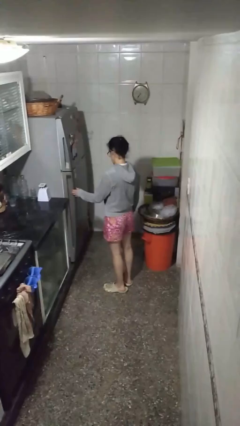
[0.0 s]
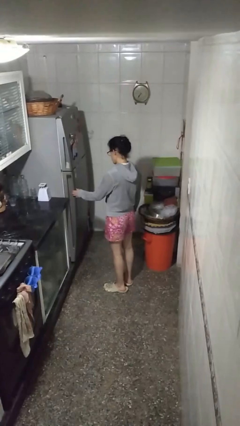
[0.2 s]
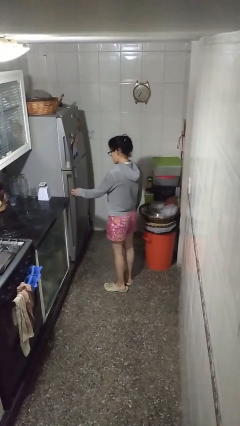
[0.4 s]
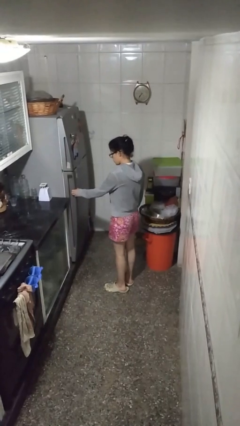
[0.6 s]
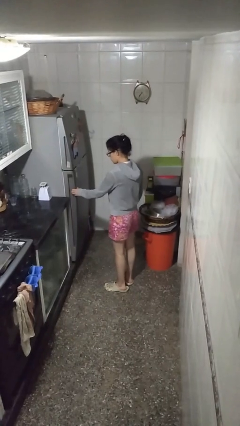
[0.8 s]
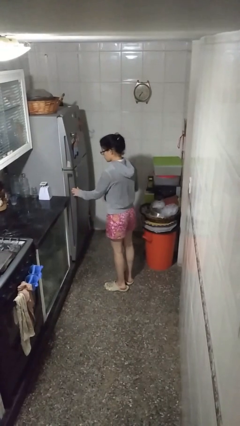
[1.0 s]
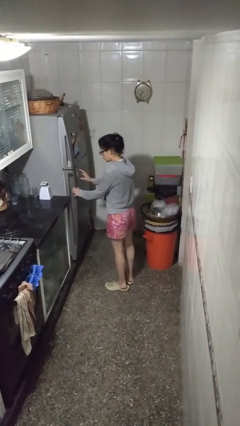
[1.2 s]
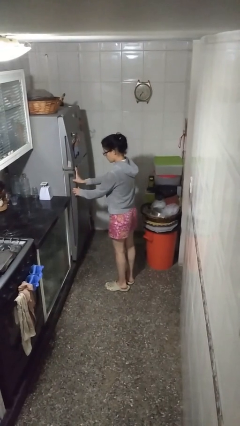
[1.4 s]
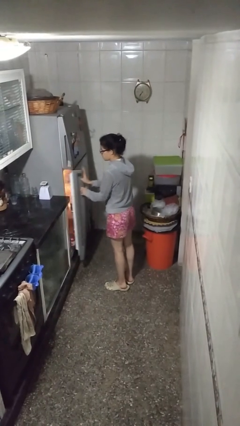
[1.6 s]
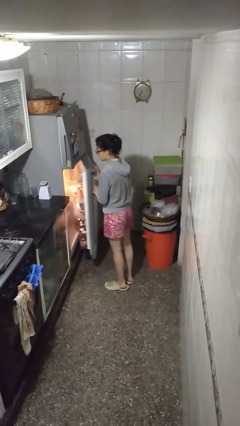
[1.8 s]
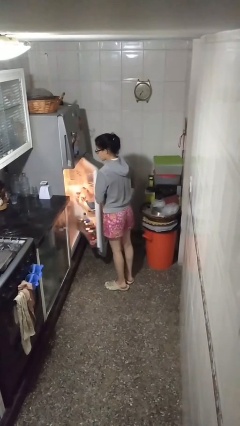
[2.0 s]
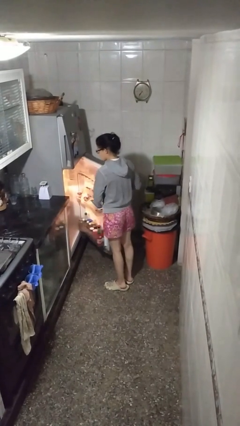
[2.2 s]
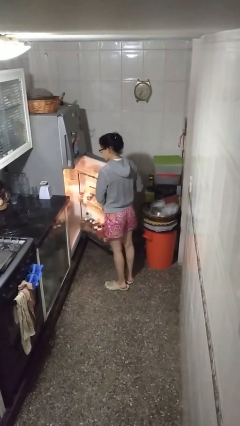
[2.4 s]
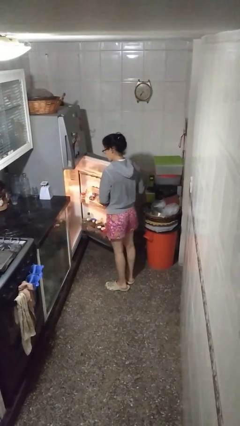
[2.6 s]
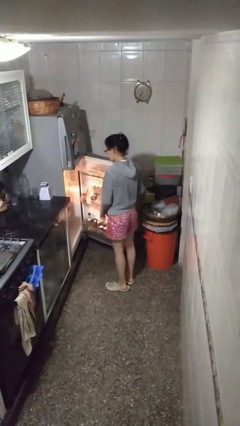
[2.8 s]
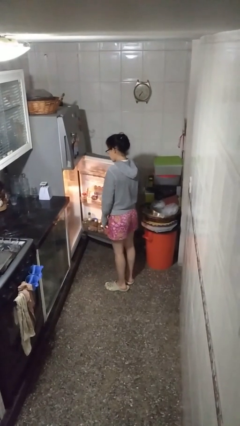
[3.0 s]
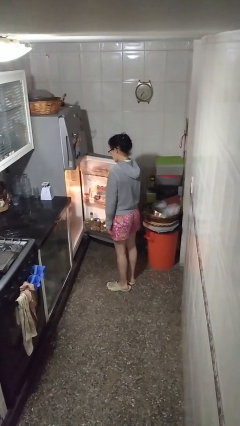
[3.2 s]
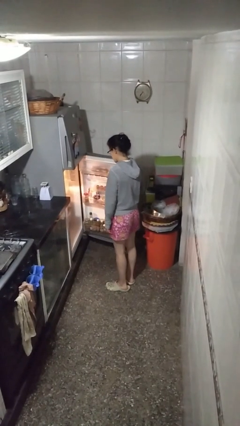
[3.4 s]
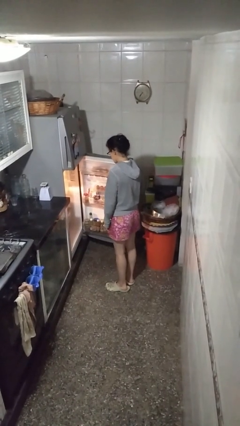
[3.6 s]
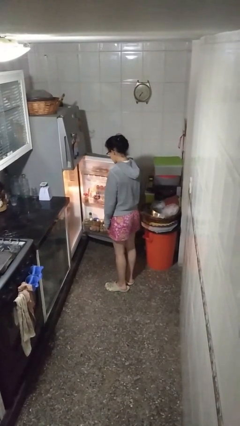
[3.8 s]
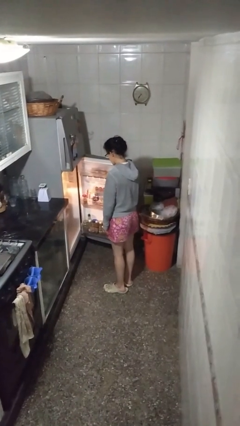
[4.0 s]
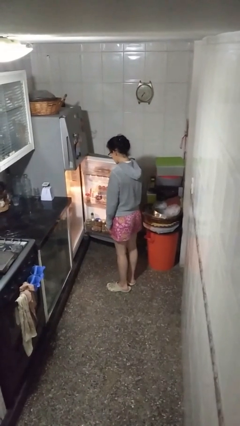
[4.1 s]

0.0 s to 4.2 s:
person opens refrigerator

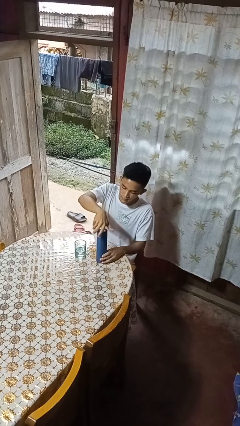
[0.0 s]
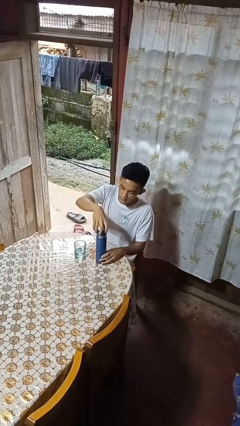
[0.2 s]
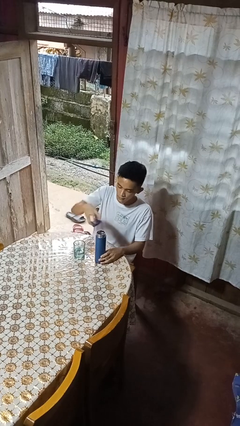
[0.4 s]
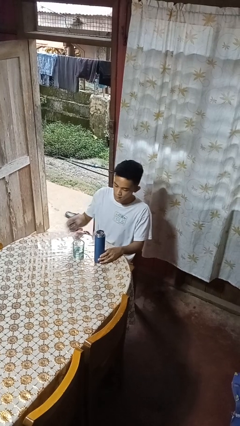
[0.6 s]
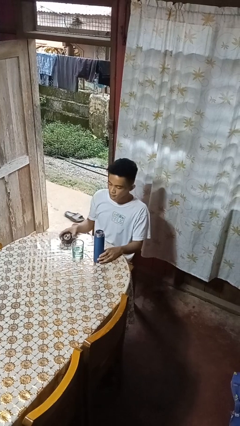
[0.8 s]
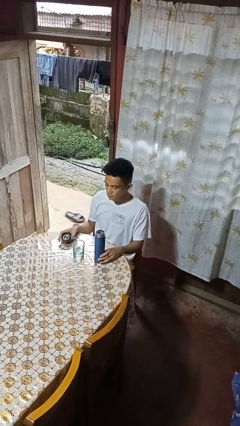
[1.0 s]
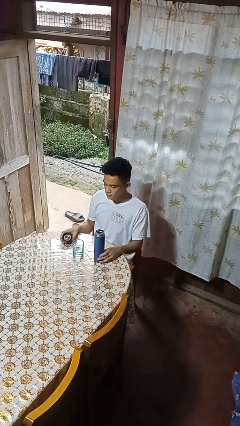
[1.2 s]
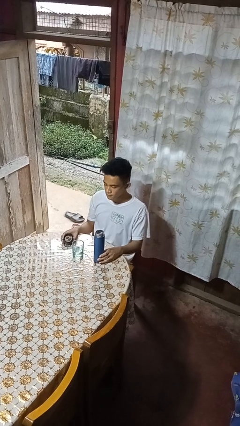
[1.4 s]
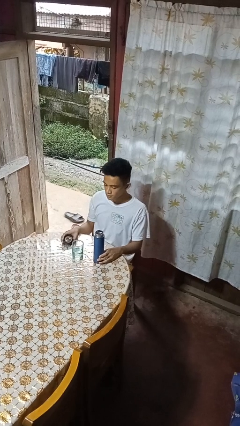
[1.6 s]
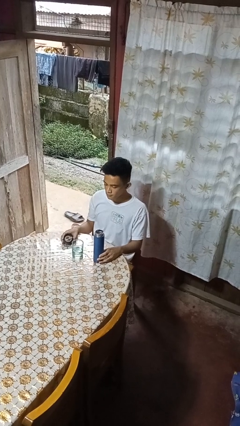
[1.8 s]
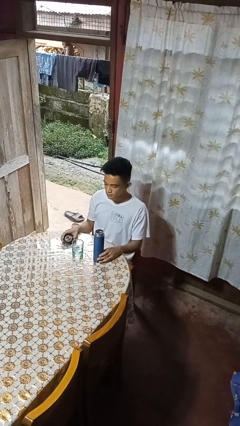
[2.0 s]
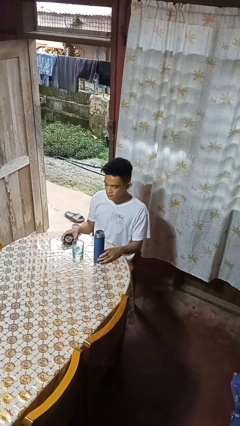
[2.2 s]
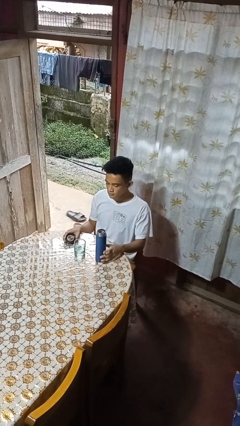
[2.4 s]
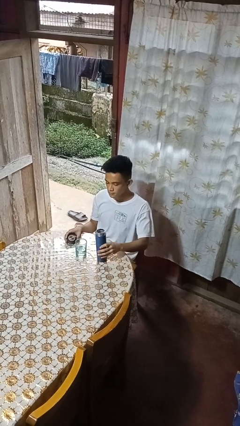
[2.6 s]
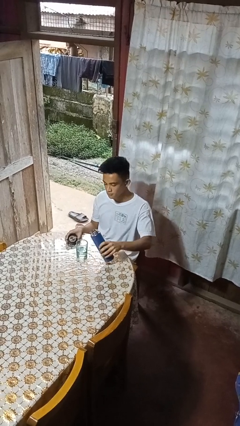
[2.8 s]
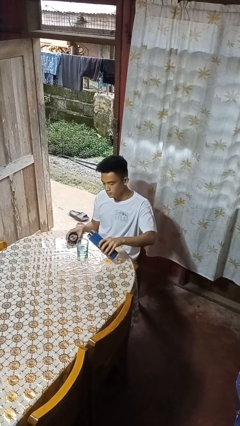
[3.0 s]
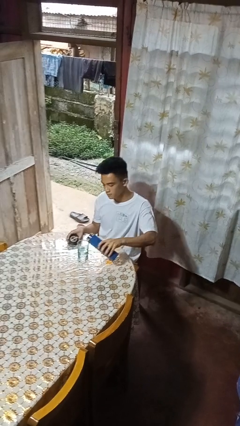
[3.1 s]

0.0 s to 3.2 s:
person unscrews lid from bottle

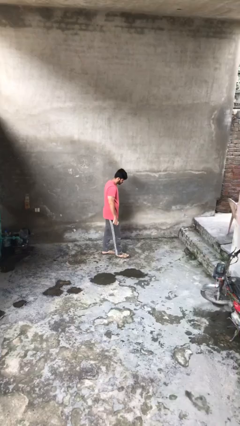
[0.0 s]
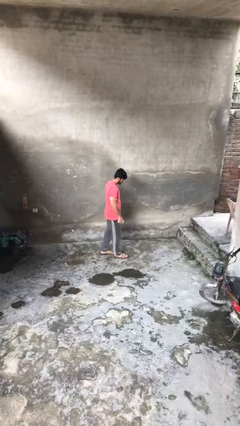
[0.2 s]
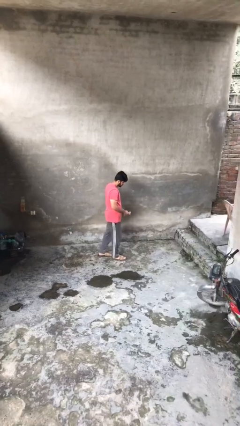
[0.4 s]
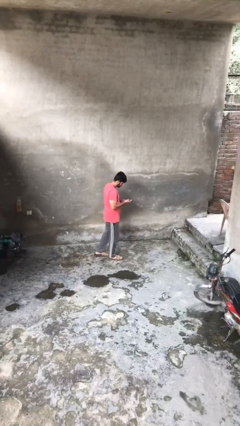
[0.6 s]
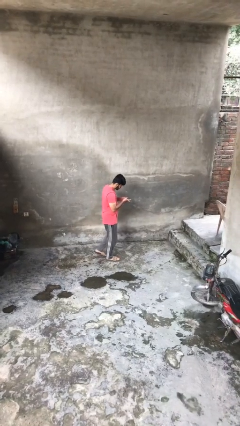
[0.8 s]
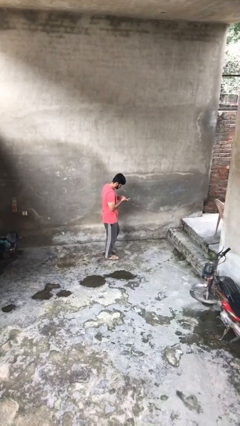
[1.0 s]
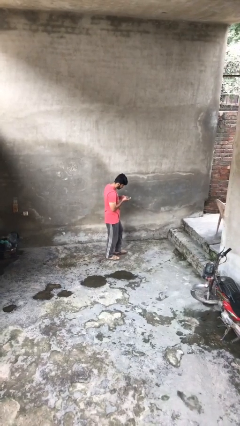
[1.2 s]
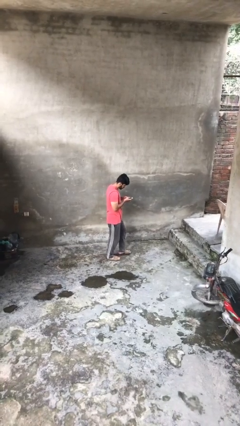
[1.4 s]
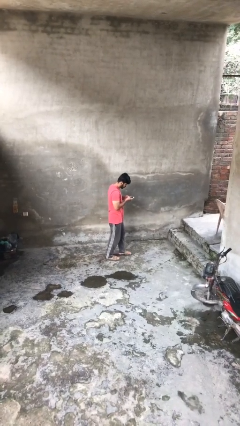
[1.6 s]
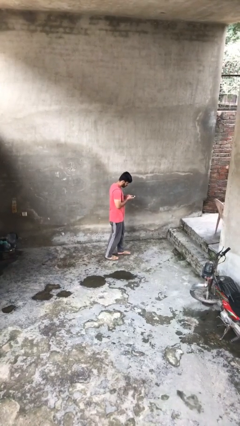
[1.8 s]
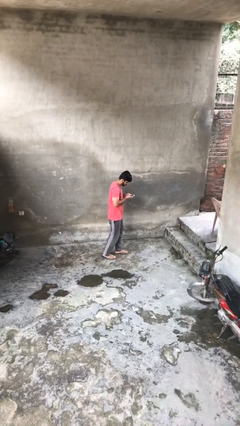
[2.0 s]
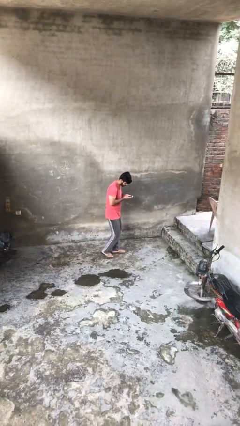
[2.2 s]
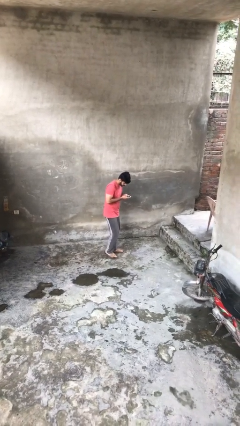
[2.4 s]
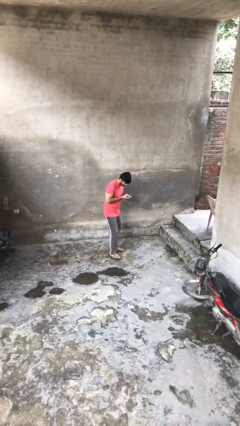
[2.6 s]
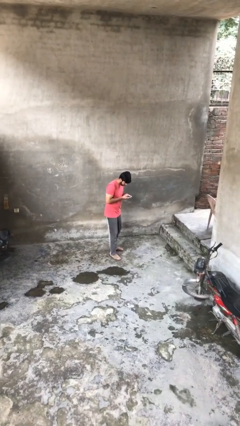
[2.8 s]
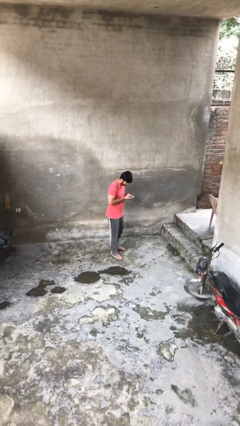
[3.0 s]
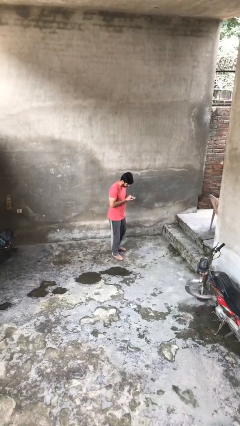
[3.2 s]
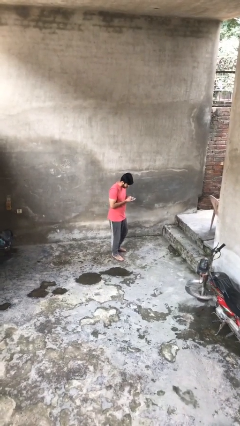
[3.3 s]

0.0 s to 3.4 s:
person texts on phone

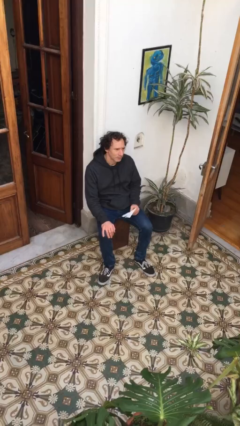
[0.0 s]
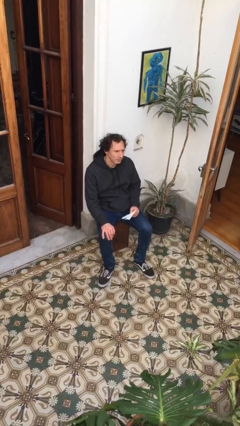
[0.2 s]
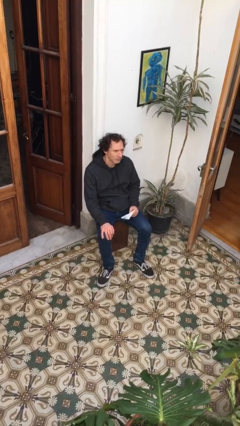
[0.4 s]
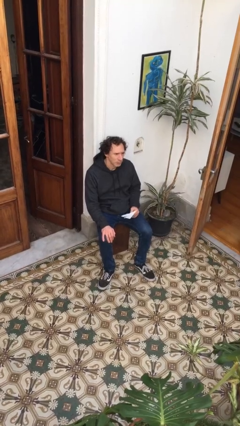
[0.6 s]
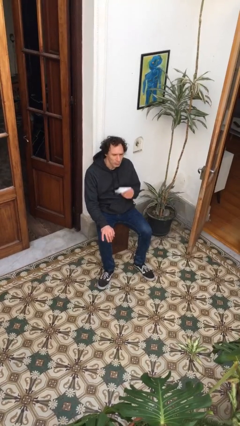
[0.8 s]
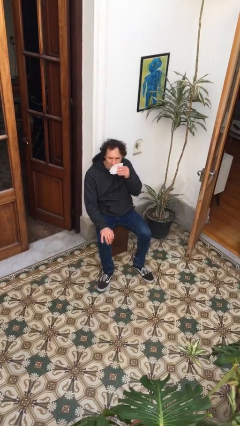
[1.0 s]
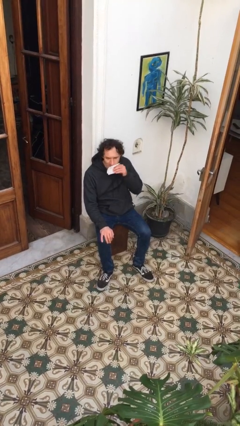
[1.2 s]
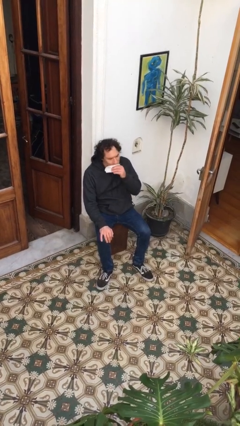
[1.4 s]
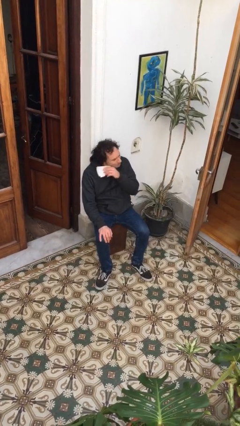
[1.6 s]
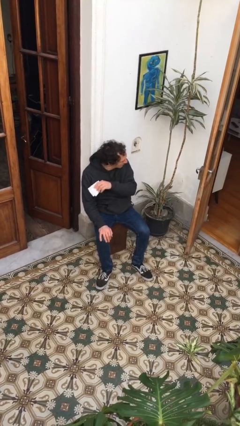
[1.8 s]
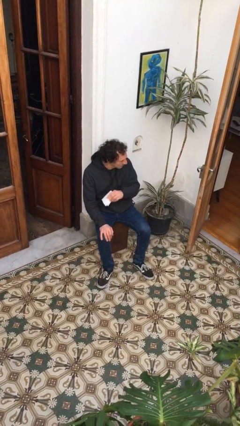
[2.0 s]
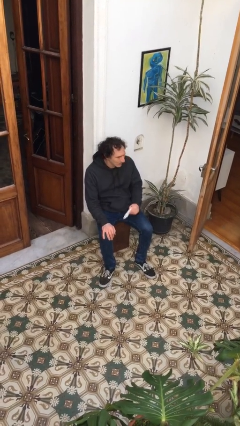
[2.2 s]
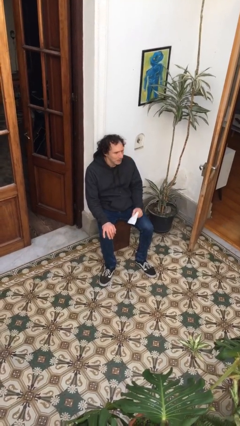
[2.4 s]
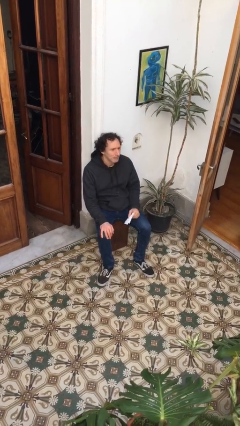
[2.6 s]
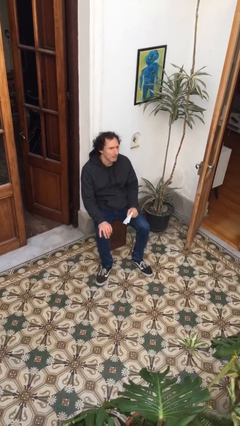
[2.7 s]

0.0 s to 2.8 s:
person wipes mouth with napkin

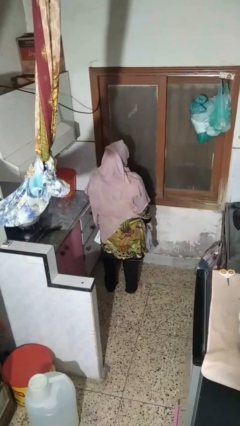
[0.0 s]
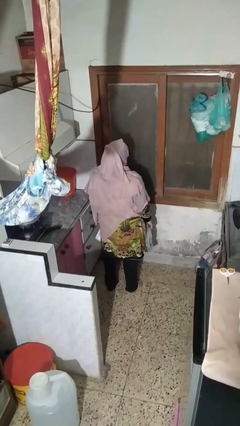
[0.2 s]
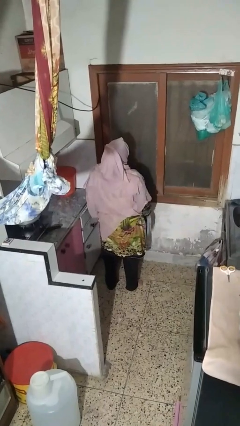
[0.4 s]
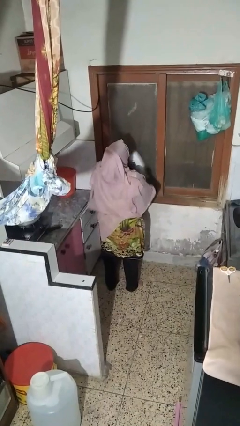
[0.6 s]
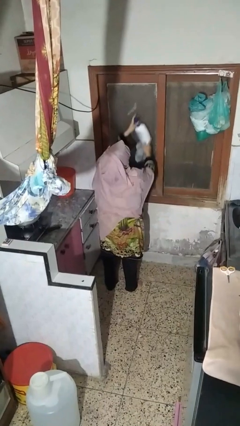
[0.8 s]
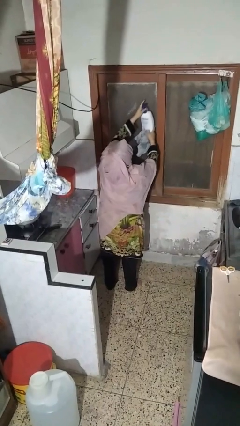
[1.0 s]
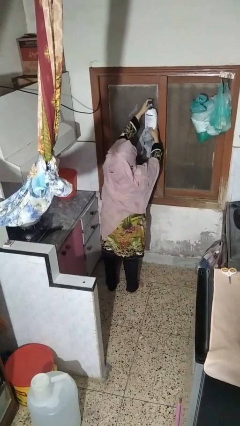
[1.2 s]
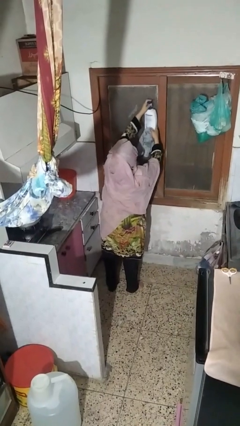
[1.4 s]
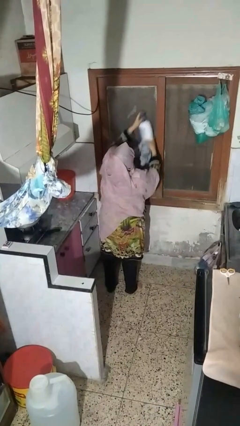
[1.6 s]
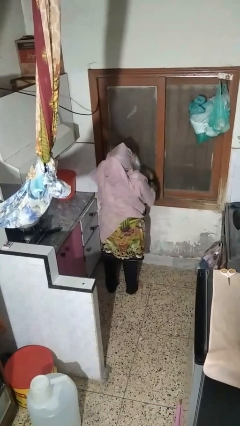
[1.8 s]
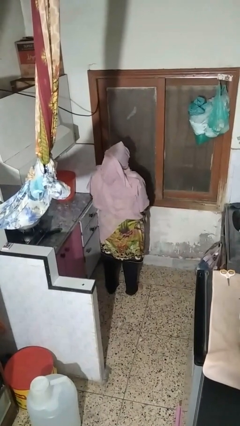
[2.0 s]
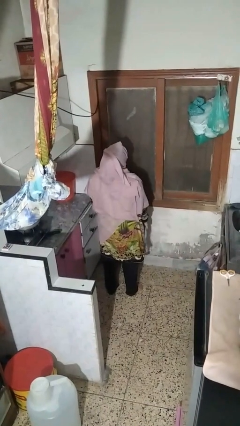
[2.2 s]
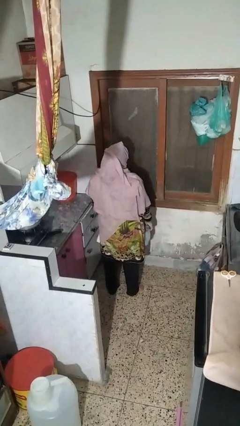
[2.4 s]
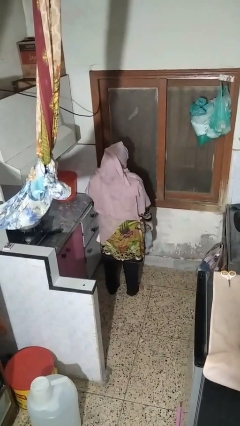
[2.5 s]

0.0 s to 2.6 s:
person sprays from bottle

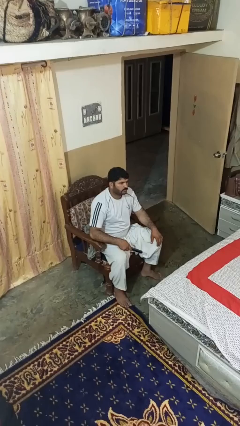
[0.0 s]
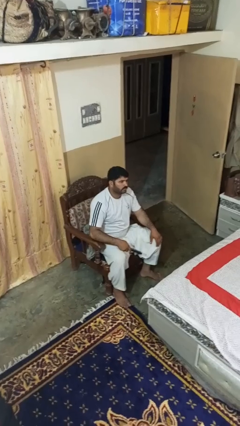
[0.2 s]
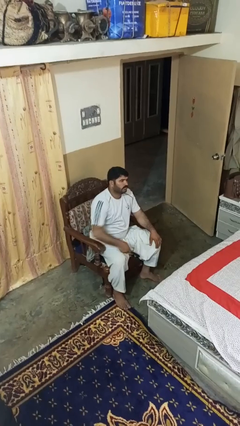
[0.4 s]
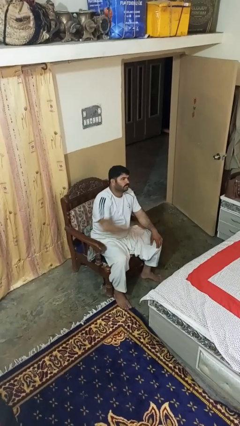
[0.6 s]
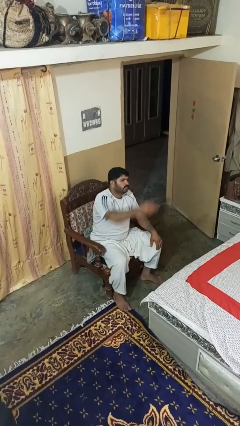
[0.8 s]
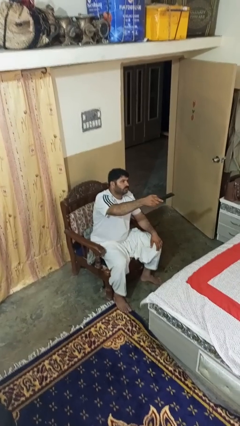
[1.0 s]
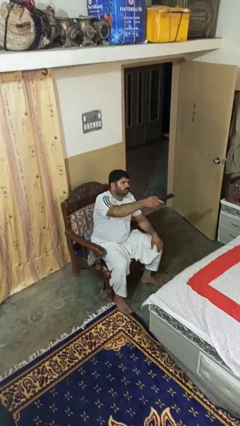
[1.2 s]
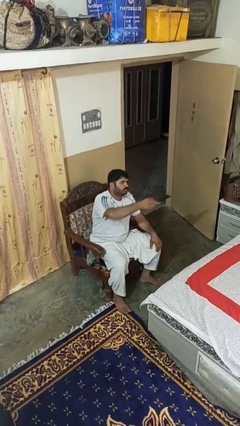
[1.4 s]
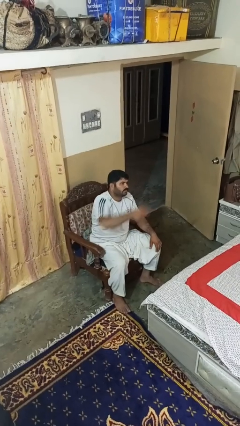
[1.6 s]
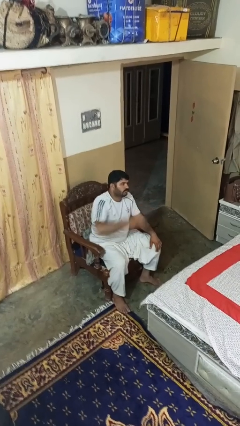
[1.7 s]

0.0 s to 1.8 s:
person uses television remote
